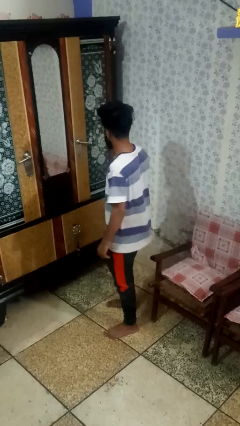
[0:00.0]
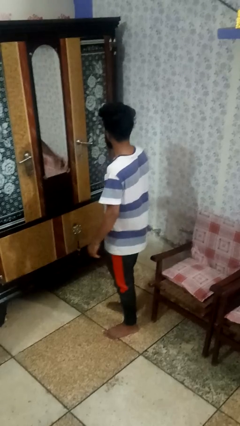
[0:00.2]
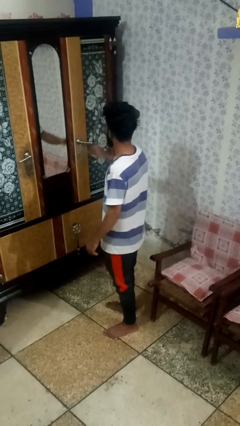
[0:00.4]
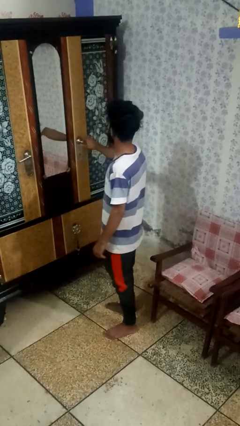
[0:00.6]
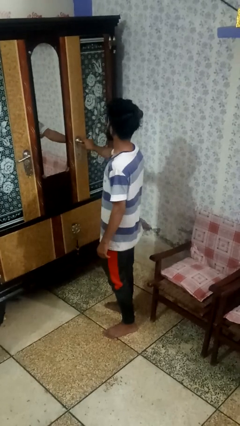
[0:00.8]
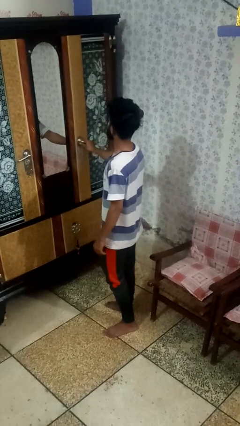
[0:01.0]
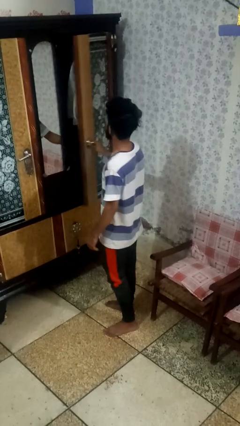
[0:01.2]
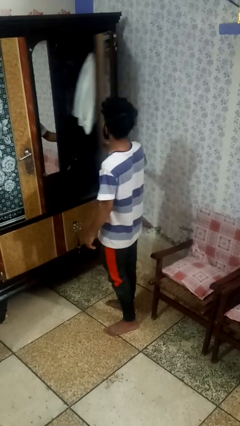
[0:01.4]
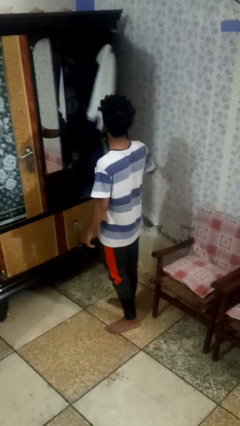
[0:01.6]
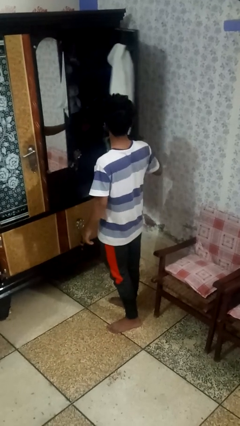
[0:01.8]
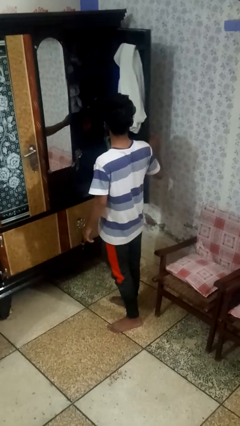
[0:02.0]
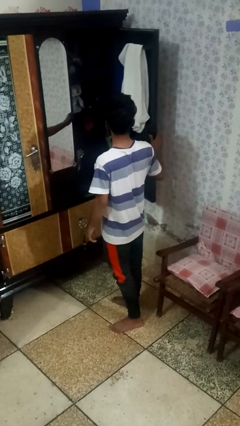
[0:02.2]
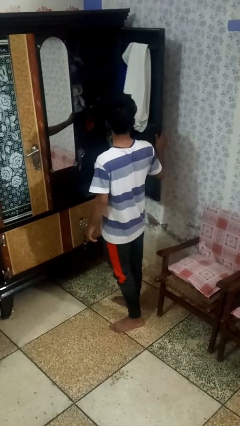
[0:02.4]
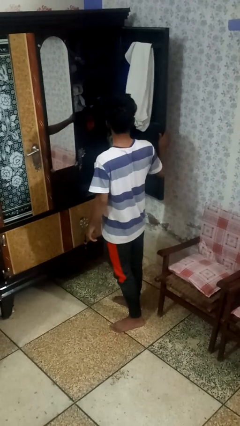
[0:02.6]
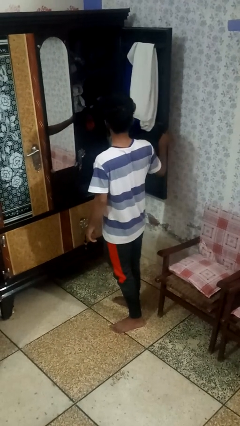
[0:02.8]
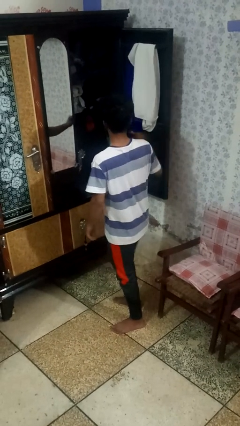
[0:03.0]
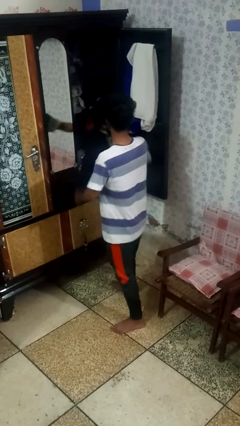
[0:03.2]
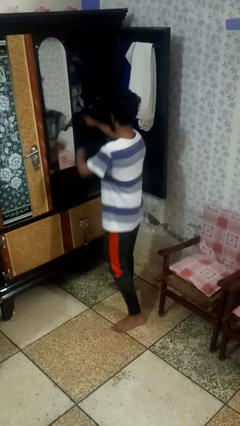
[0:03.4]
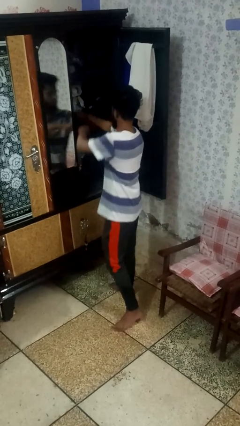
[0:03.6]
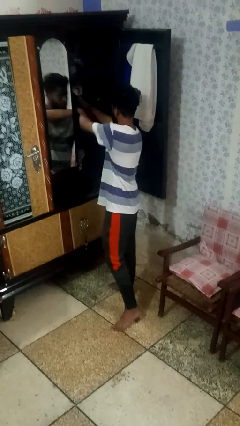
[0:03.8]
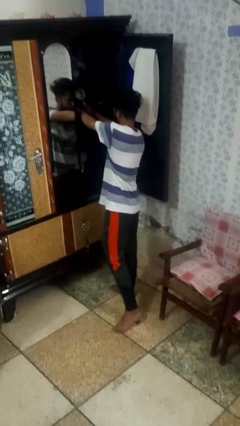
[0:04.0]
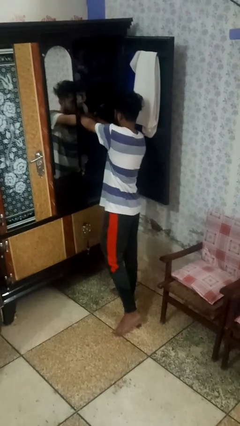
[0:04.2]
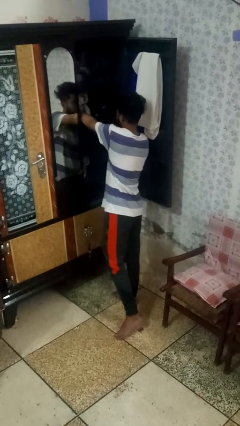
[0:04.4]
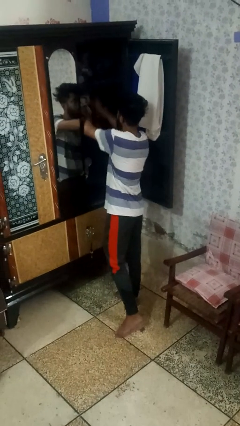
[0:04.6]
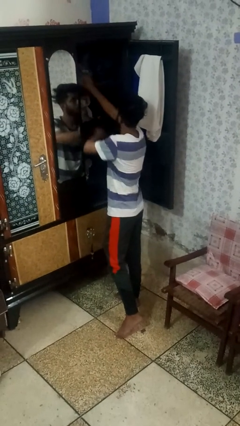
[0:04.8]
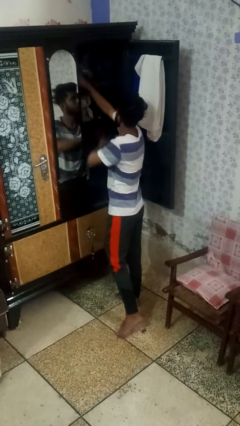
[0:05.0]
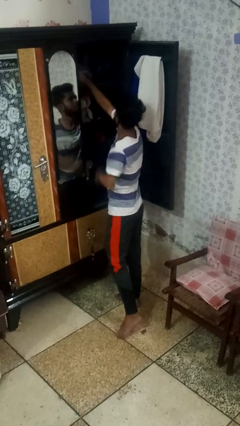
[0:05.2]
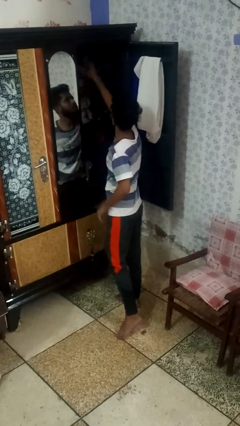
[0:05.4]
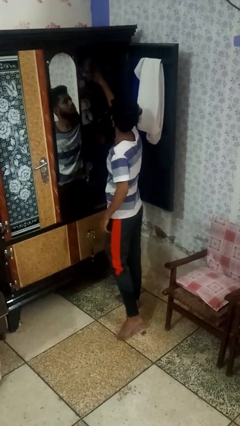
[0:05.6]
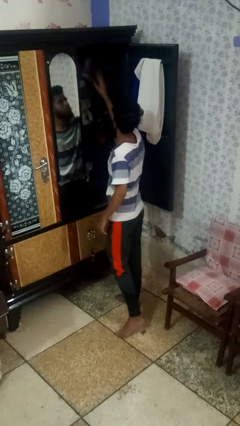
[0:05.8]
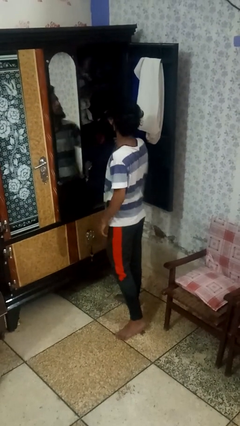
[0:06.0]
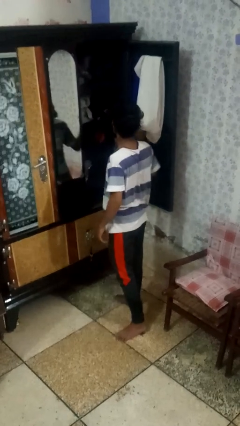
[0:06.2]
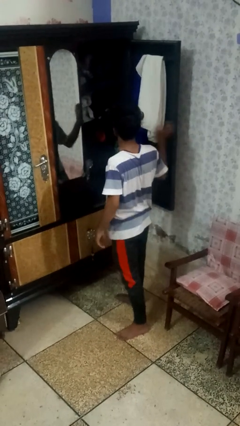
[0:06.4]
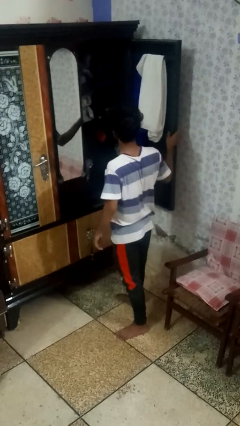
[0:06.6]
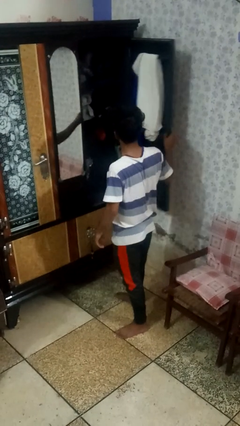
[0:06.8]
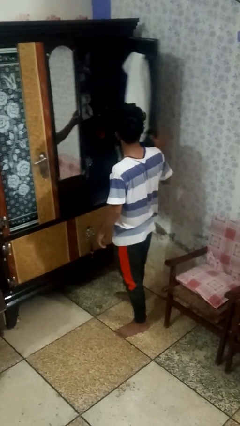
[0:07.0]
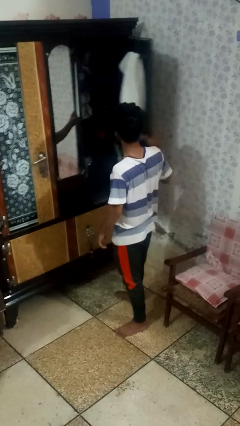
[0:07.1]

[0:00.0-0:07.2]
person opens dresser drawer

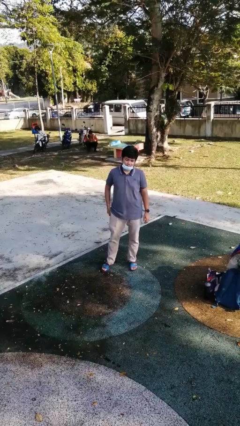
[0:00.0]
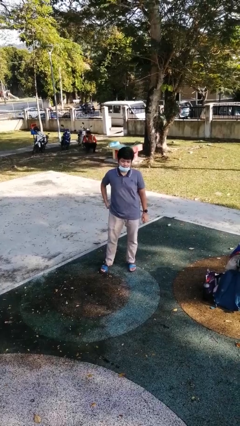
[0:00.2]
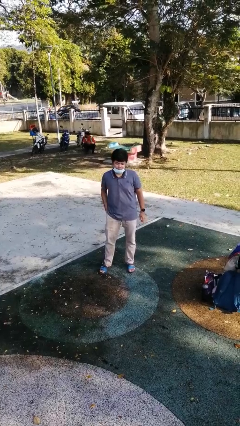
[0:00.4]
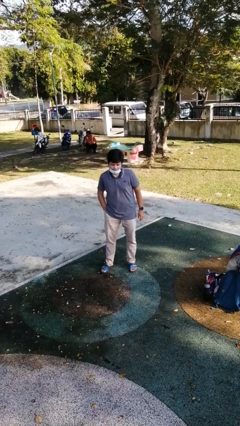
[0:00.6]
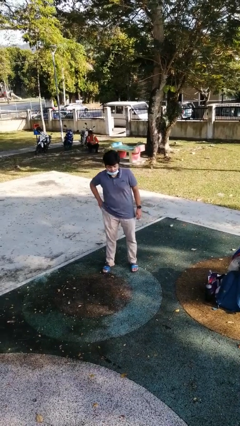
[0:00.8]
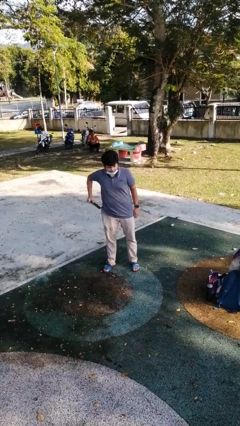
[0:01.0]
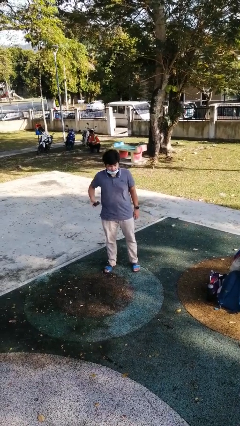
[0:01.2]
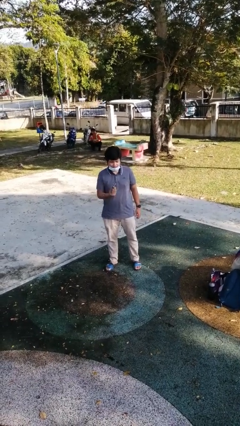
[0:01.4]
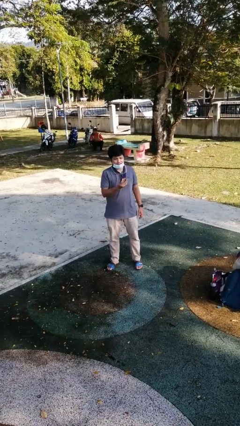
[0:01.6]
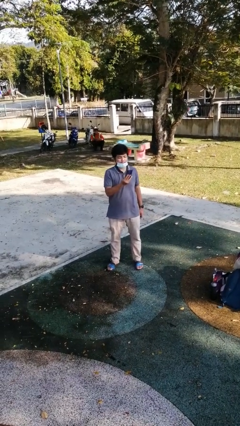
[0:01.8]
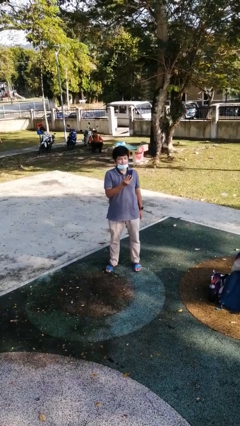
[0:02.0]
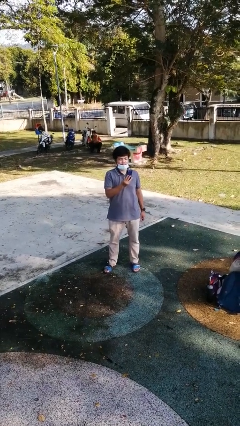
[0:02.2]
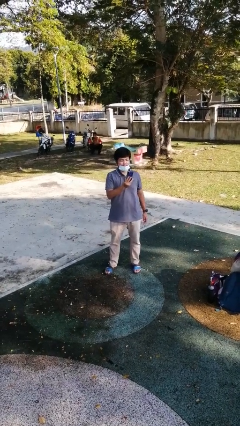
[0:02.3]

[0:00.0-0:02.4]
person takes phone from pocket

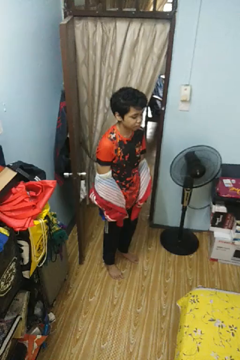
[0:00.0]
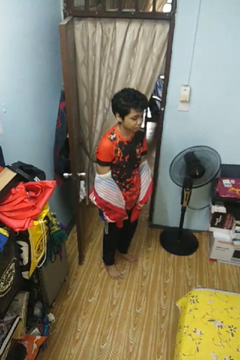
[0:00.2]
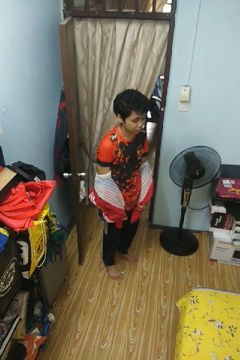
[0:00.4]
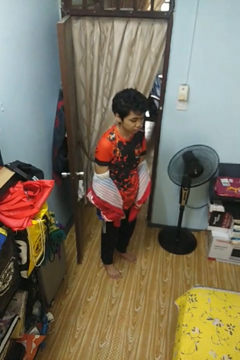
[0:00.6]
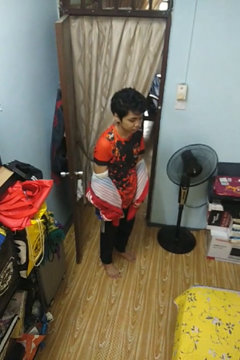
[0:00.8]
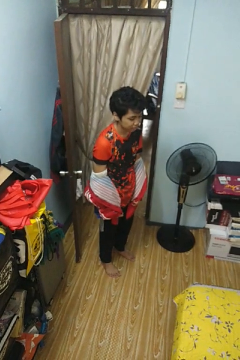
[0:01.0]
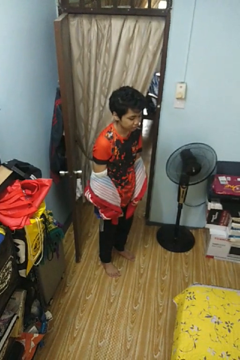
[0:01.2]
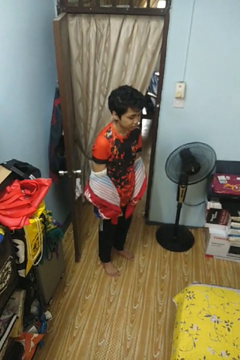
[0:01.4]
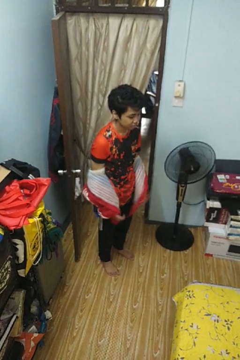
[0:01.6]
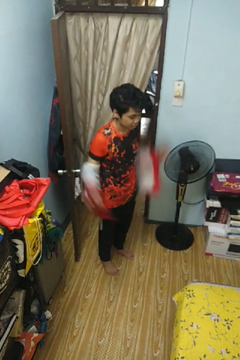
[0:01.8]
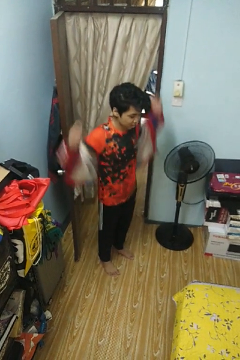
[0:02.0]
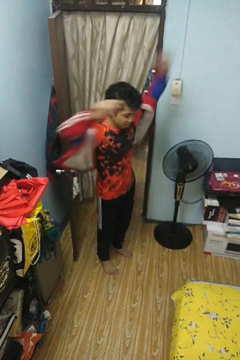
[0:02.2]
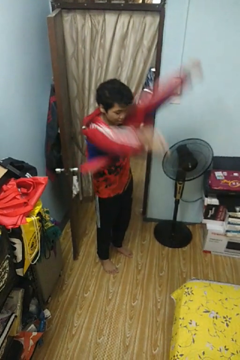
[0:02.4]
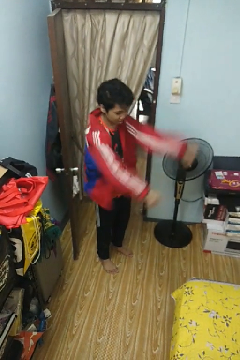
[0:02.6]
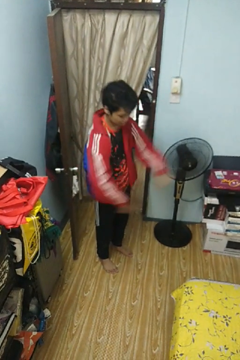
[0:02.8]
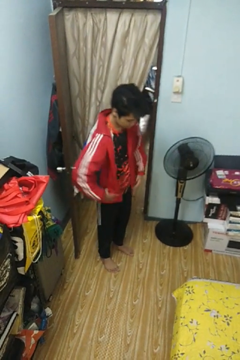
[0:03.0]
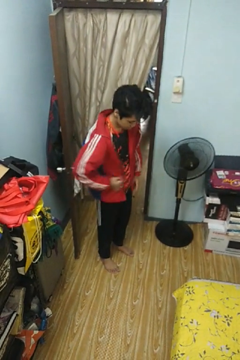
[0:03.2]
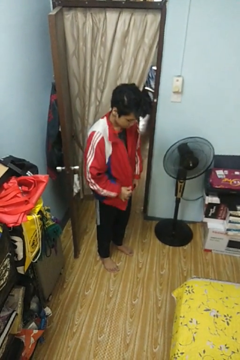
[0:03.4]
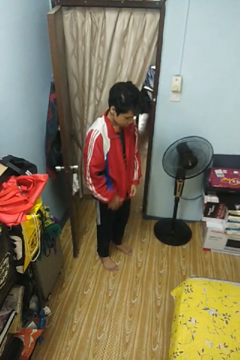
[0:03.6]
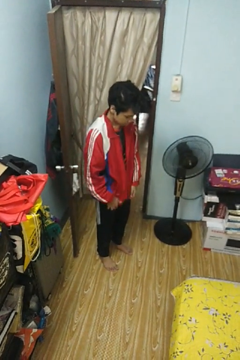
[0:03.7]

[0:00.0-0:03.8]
person puts on jacket

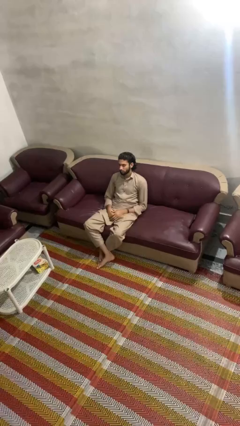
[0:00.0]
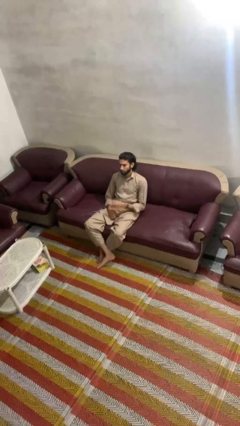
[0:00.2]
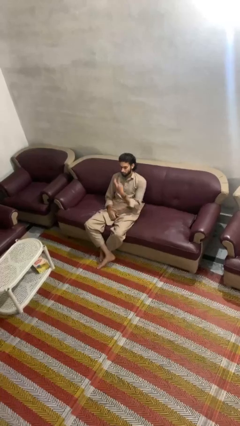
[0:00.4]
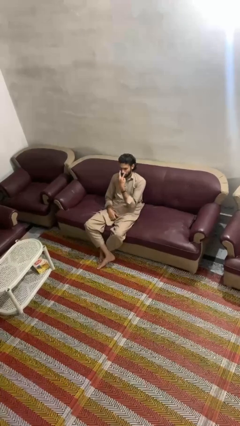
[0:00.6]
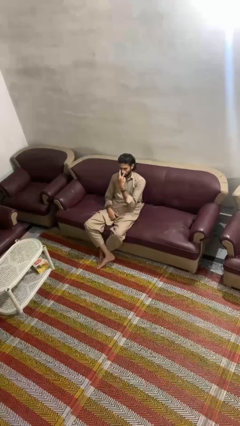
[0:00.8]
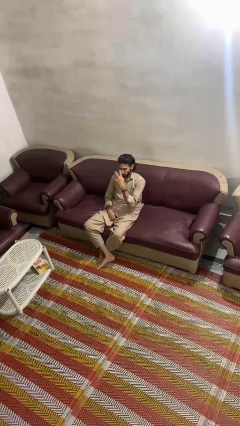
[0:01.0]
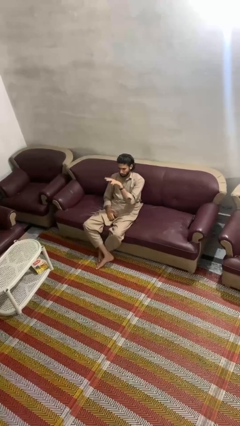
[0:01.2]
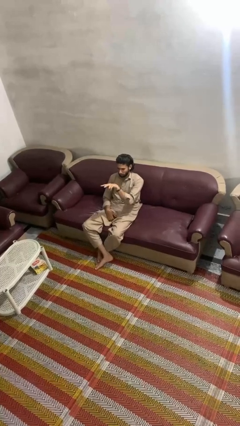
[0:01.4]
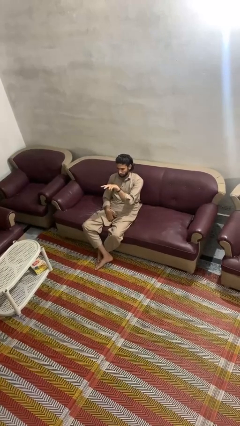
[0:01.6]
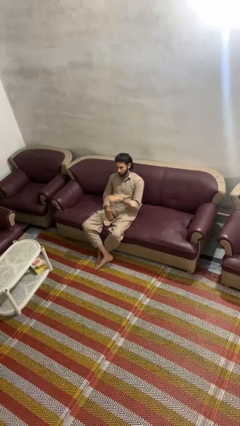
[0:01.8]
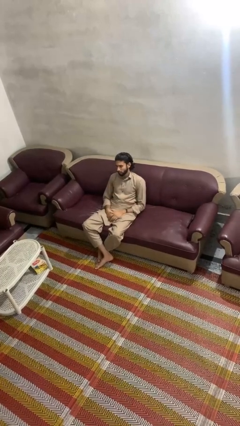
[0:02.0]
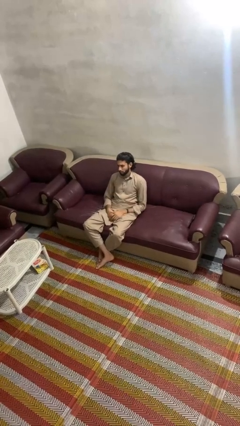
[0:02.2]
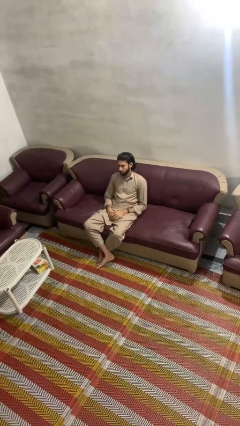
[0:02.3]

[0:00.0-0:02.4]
person gestures watch closely

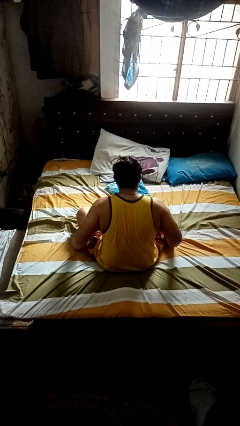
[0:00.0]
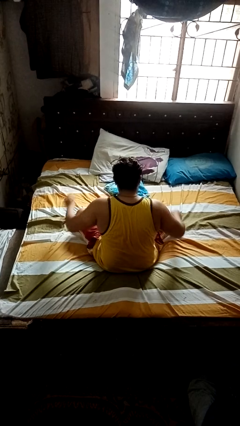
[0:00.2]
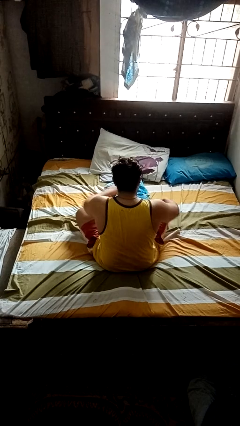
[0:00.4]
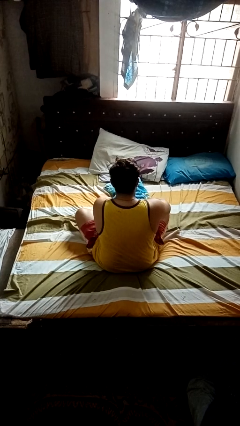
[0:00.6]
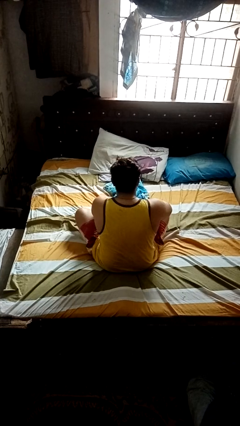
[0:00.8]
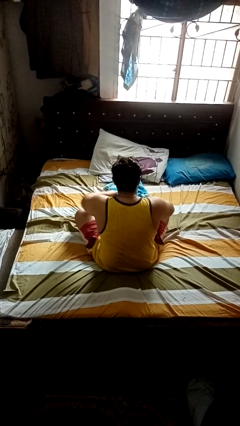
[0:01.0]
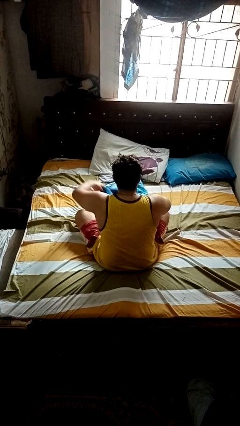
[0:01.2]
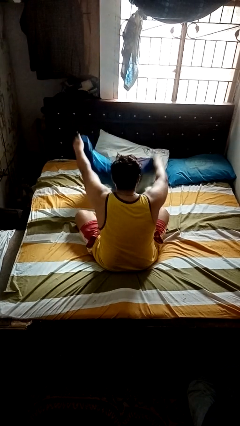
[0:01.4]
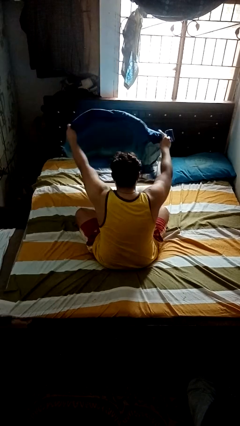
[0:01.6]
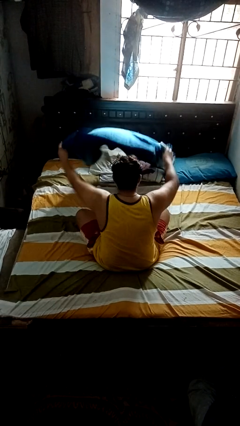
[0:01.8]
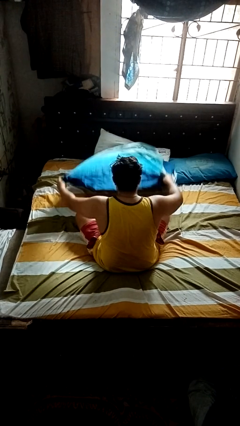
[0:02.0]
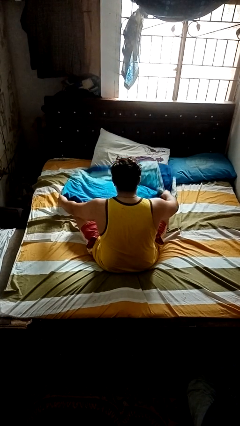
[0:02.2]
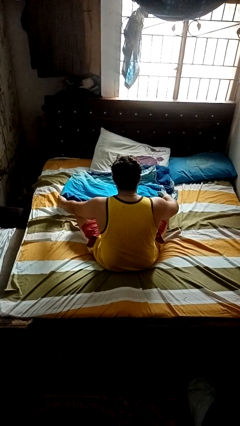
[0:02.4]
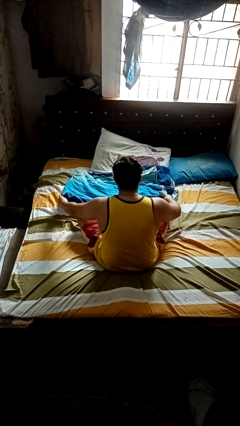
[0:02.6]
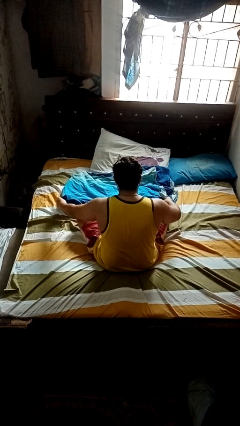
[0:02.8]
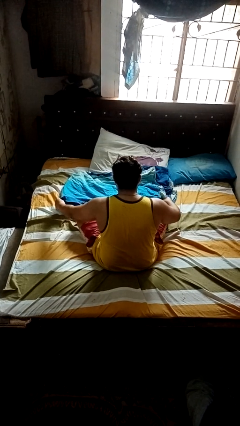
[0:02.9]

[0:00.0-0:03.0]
person unfolds blanket
